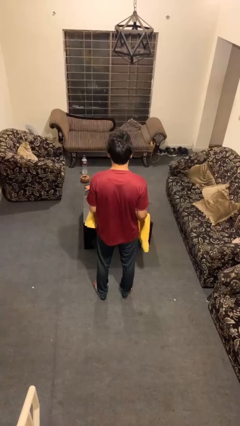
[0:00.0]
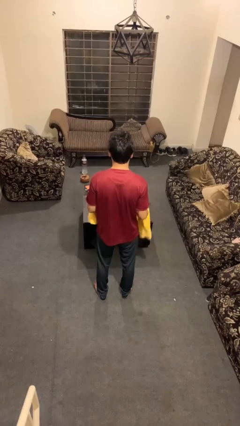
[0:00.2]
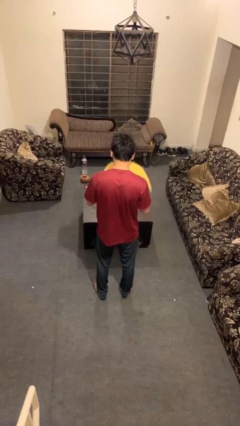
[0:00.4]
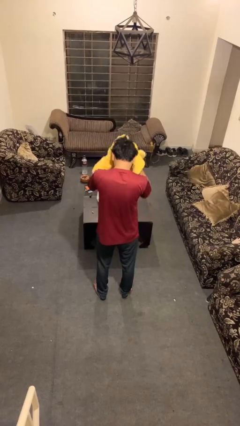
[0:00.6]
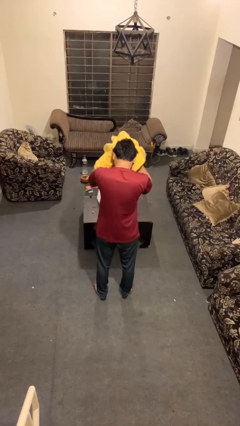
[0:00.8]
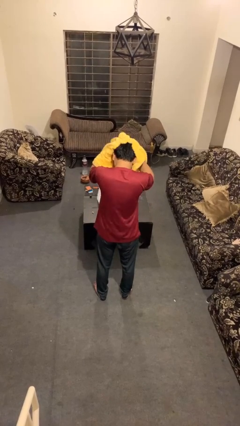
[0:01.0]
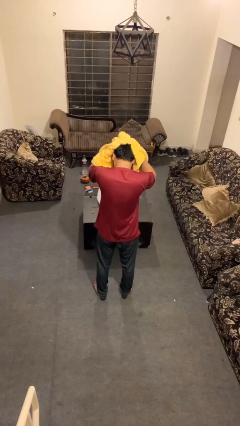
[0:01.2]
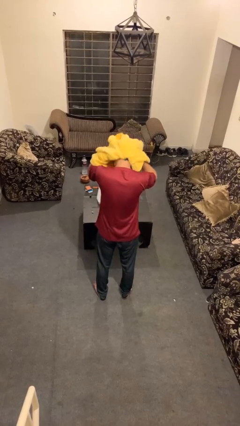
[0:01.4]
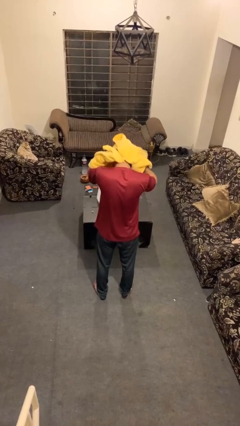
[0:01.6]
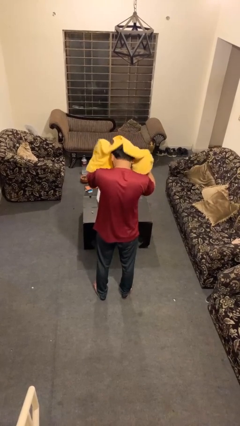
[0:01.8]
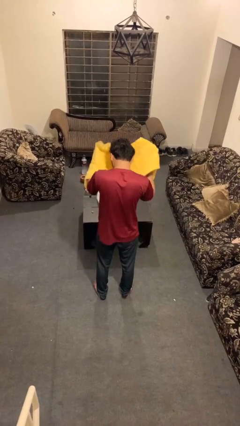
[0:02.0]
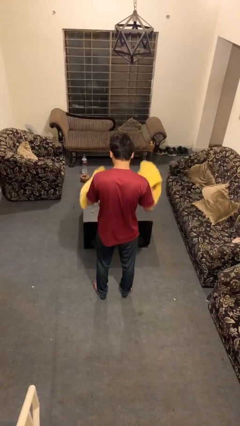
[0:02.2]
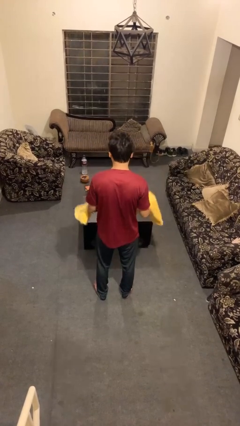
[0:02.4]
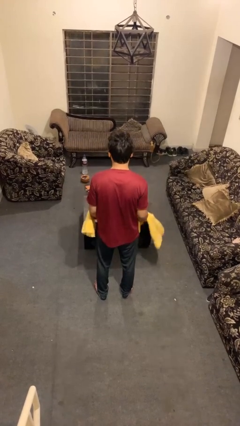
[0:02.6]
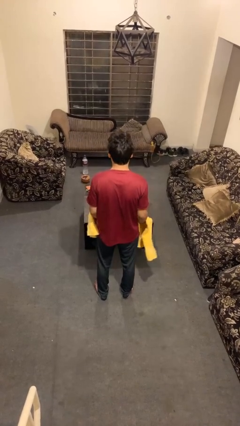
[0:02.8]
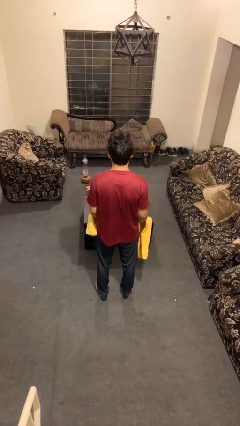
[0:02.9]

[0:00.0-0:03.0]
person dries hair with towel

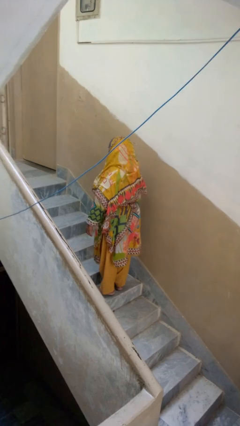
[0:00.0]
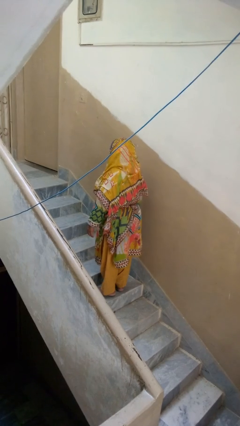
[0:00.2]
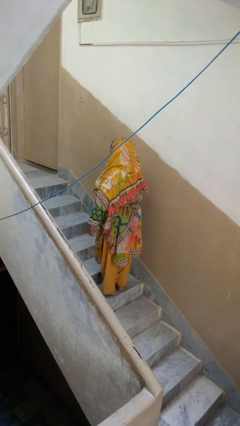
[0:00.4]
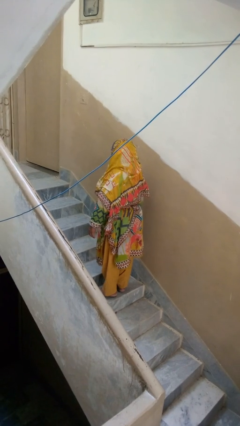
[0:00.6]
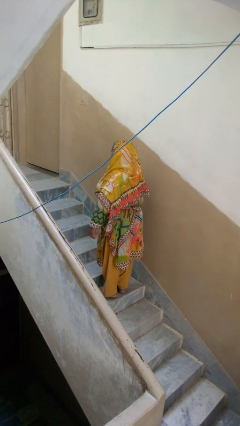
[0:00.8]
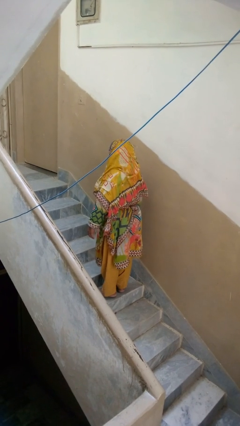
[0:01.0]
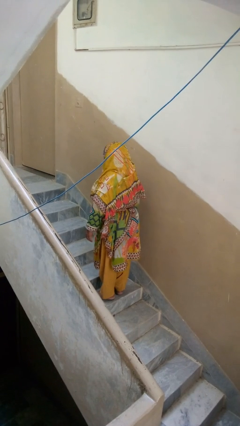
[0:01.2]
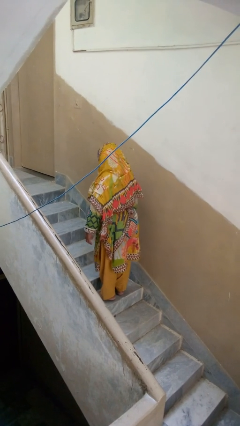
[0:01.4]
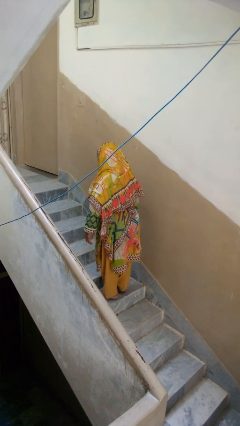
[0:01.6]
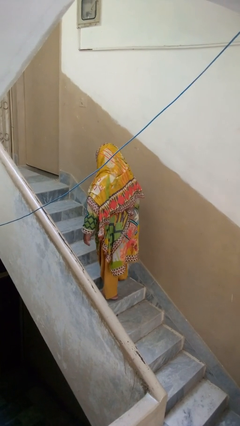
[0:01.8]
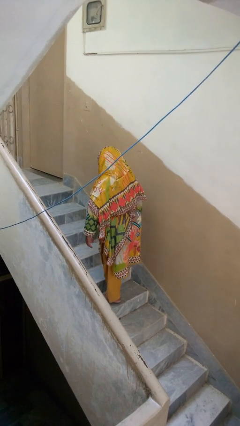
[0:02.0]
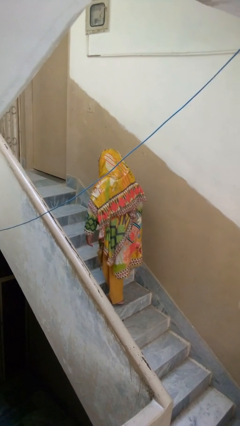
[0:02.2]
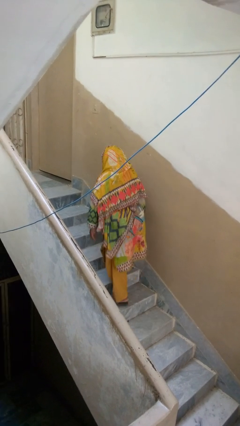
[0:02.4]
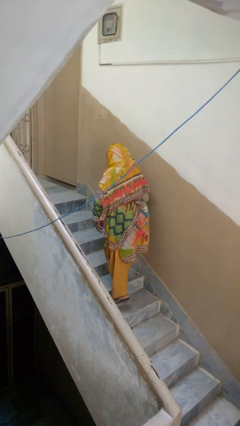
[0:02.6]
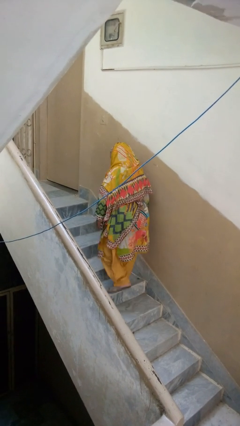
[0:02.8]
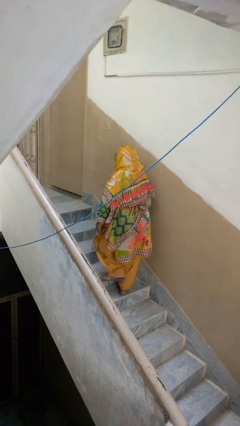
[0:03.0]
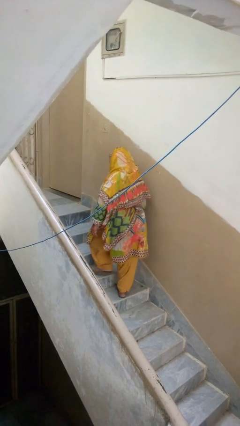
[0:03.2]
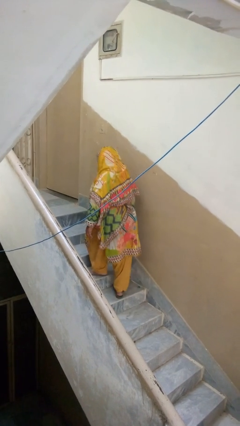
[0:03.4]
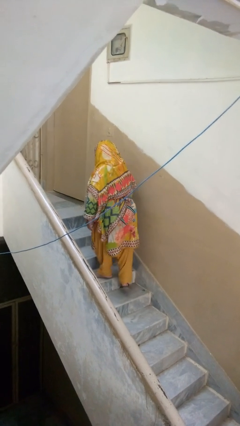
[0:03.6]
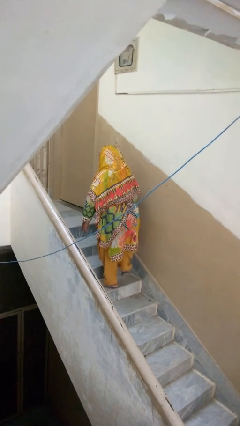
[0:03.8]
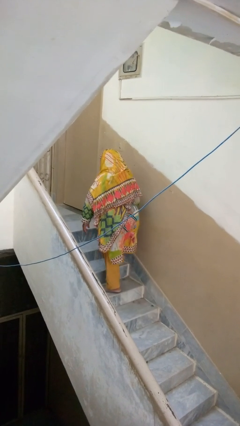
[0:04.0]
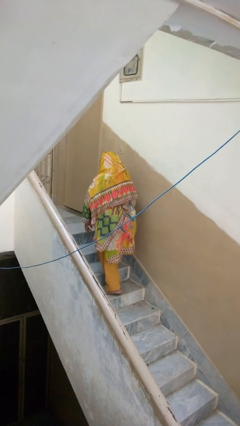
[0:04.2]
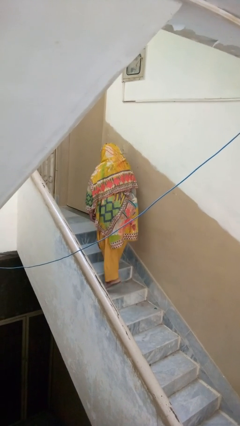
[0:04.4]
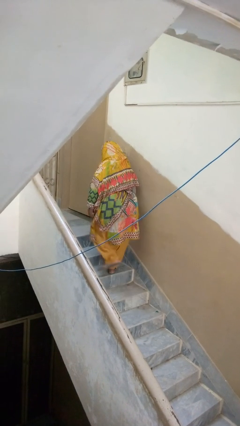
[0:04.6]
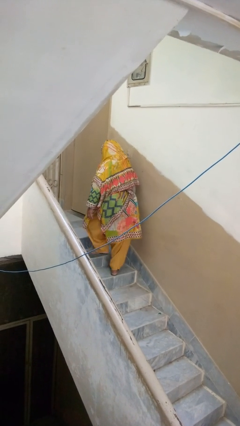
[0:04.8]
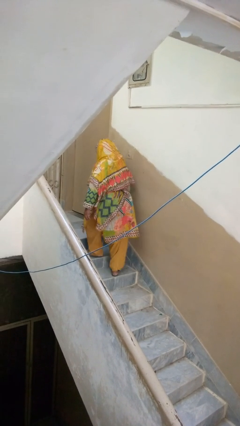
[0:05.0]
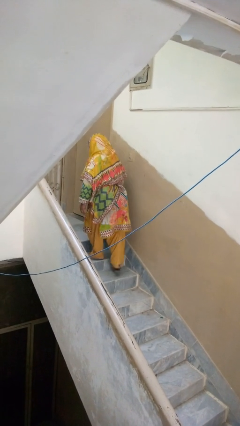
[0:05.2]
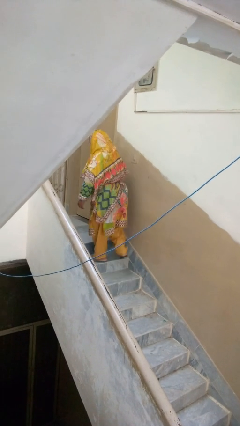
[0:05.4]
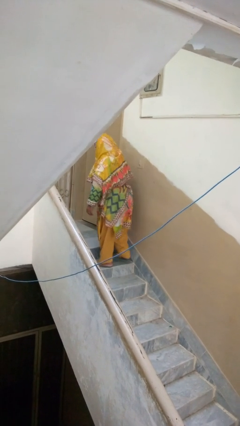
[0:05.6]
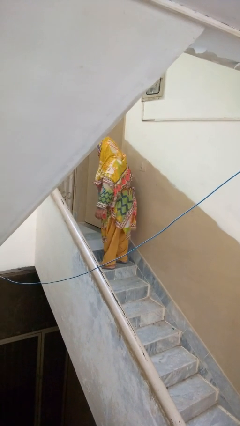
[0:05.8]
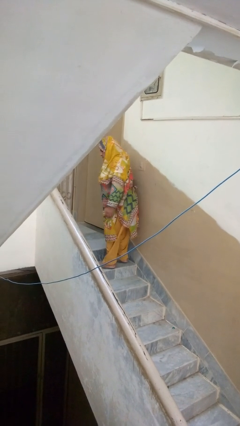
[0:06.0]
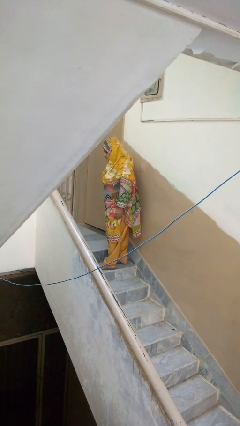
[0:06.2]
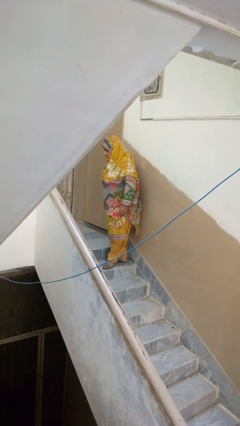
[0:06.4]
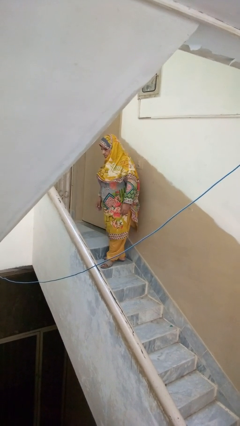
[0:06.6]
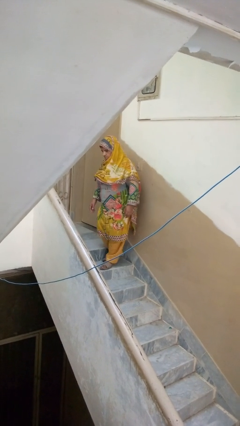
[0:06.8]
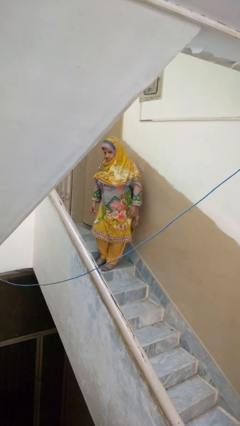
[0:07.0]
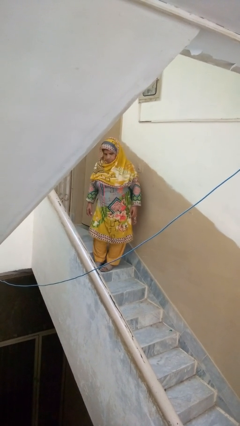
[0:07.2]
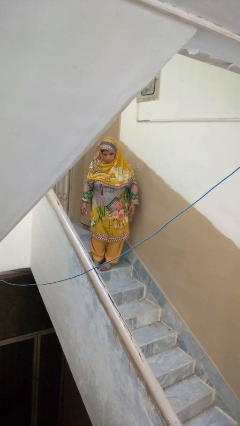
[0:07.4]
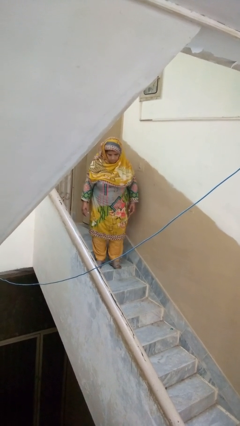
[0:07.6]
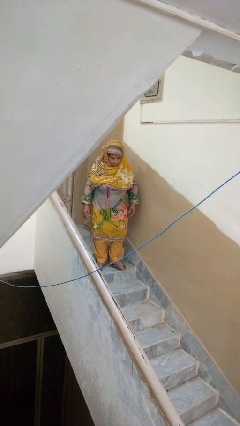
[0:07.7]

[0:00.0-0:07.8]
person climbs up stairs

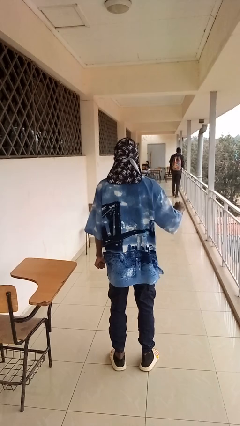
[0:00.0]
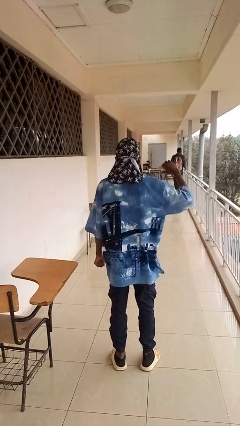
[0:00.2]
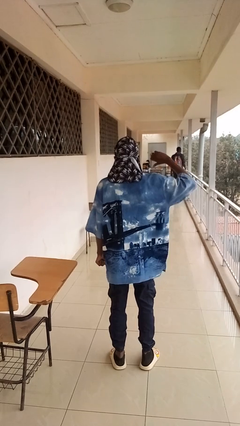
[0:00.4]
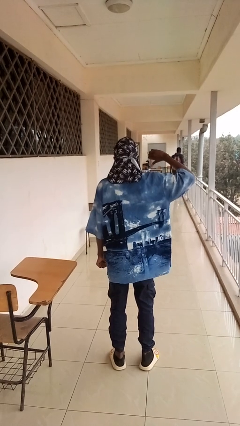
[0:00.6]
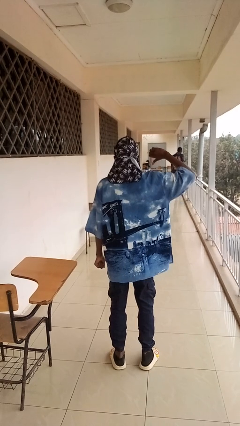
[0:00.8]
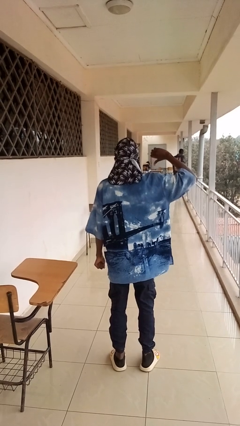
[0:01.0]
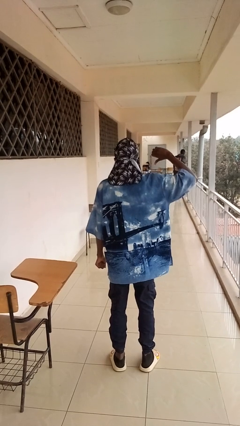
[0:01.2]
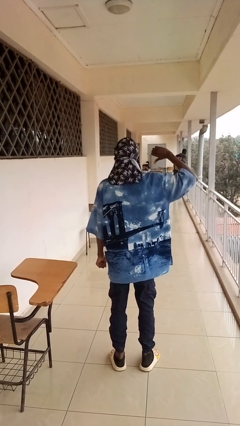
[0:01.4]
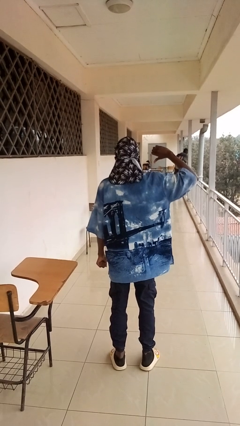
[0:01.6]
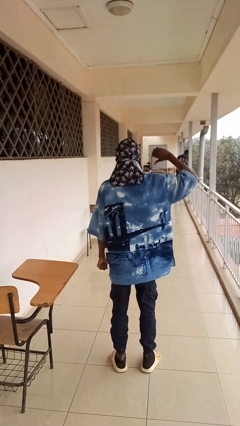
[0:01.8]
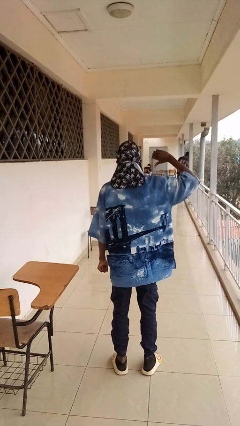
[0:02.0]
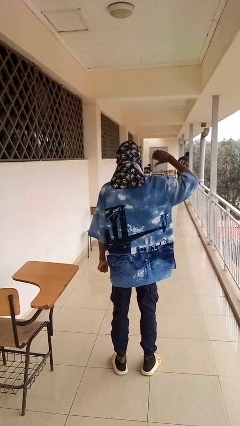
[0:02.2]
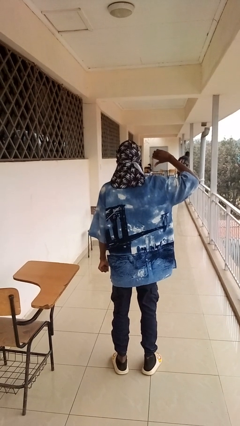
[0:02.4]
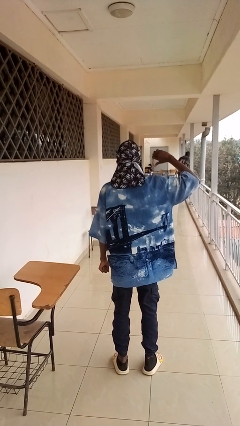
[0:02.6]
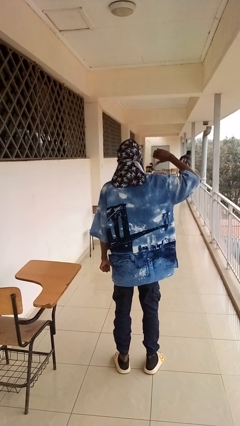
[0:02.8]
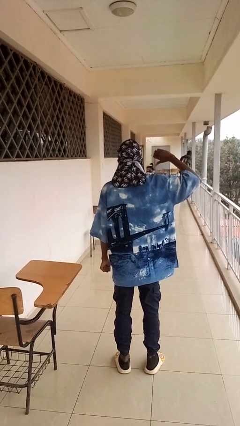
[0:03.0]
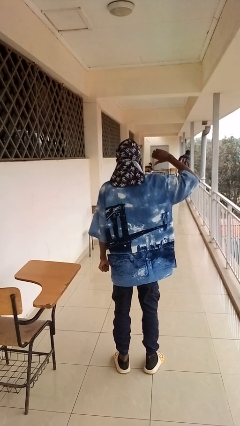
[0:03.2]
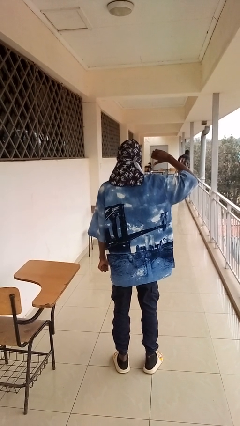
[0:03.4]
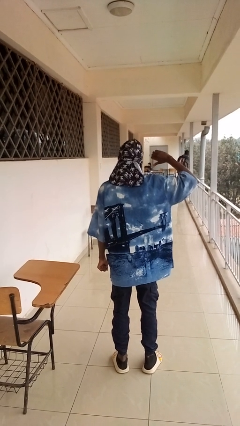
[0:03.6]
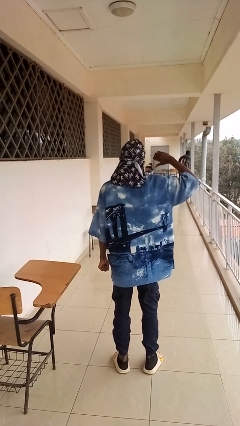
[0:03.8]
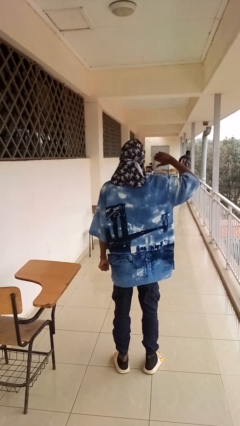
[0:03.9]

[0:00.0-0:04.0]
person gestures thumbs down

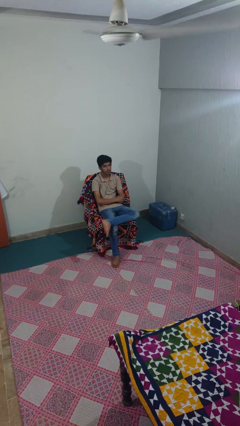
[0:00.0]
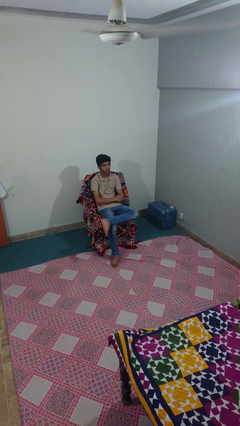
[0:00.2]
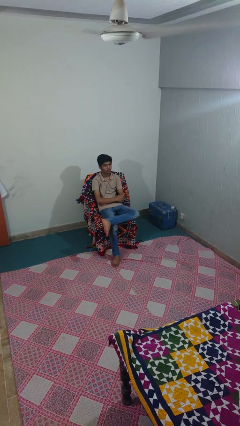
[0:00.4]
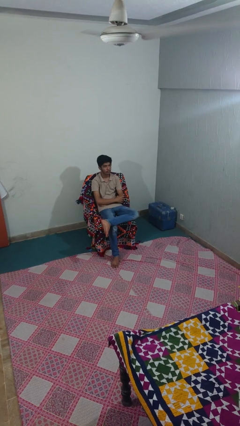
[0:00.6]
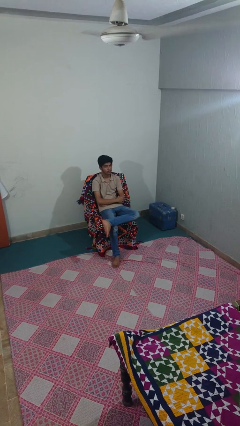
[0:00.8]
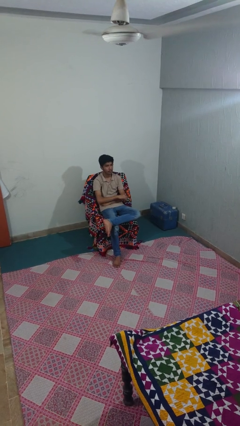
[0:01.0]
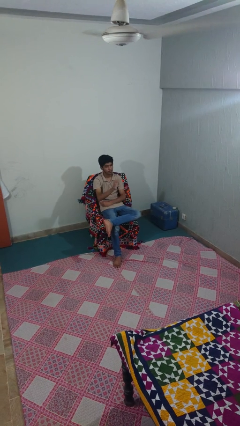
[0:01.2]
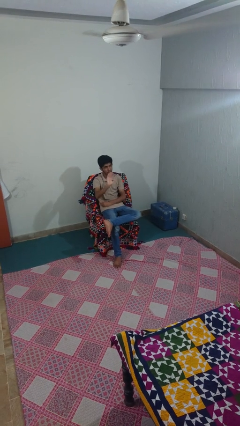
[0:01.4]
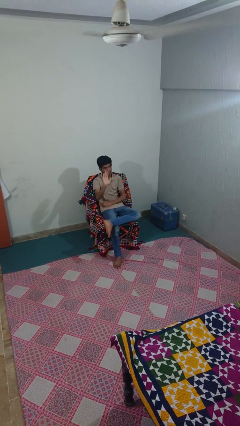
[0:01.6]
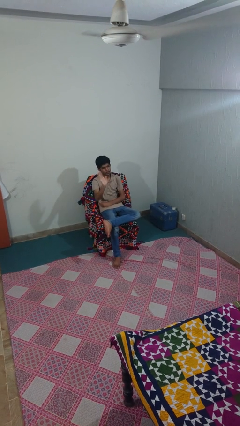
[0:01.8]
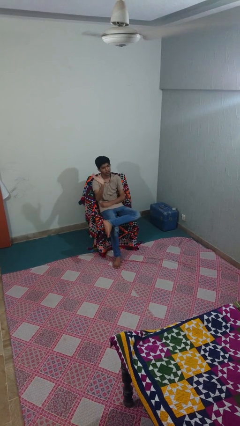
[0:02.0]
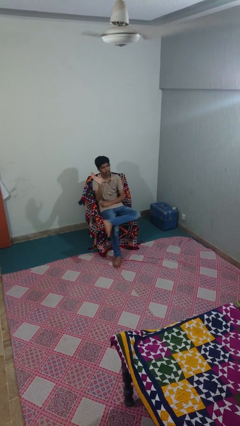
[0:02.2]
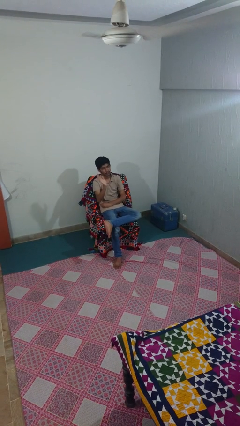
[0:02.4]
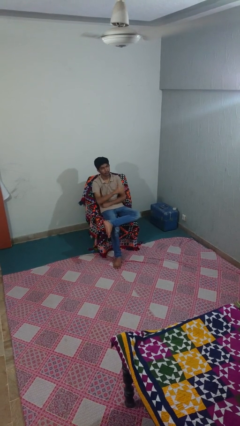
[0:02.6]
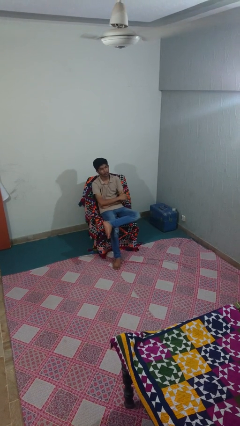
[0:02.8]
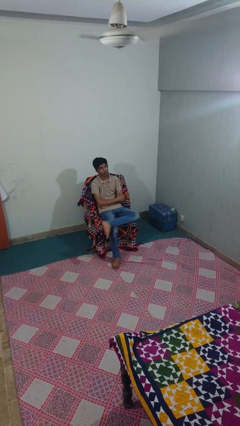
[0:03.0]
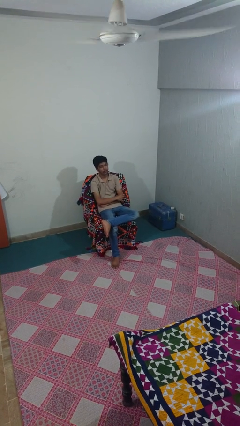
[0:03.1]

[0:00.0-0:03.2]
person waves at person
